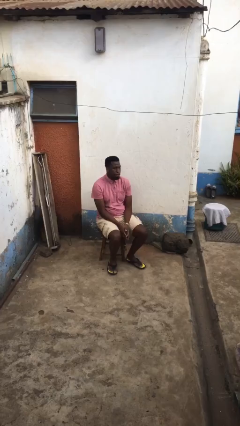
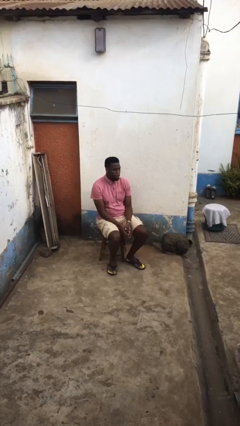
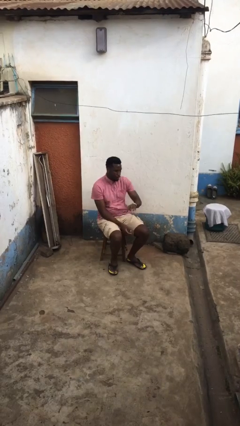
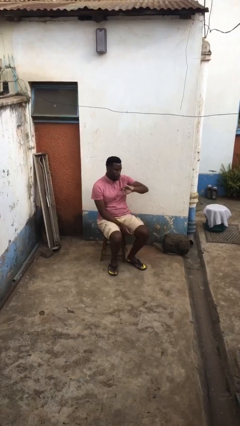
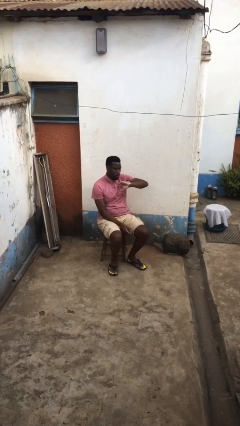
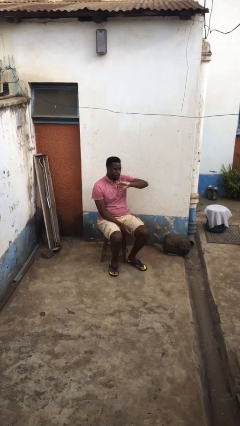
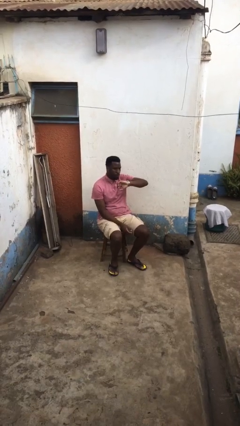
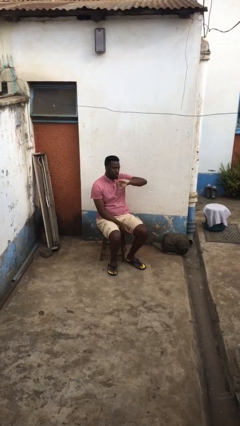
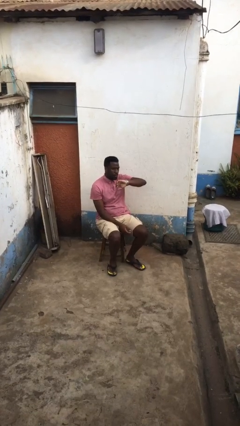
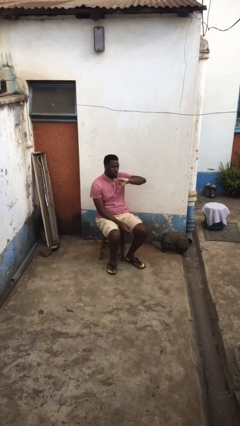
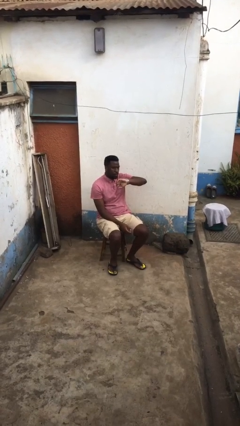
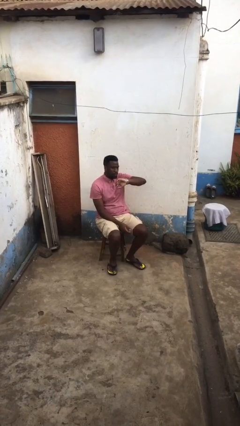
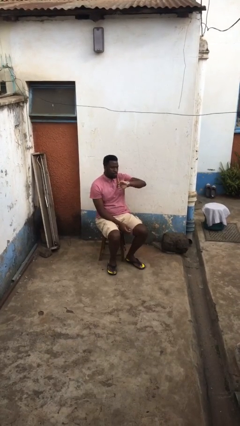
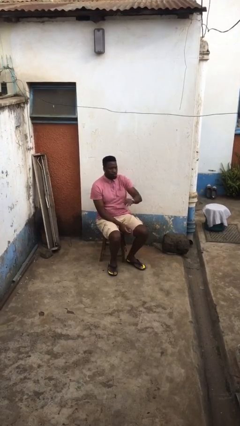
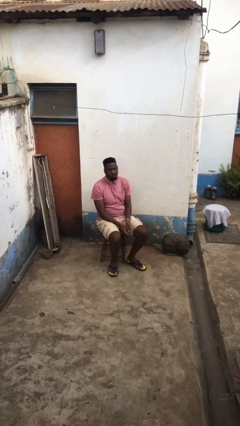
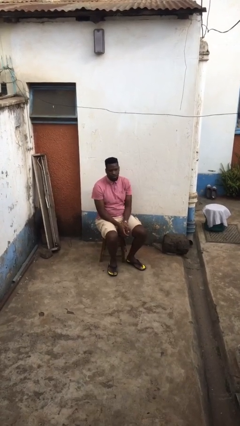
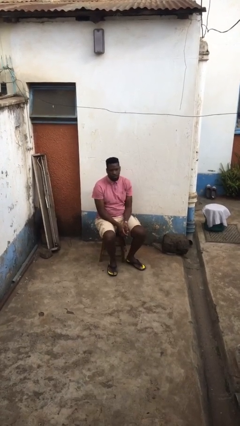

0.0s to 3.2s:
person looks at wristwatch

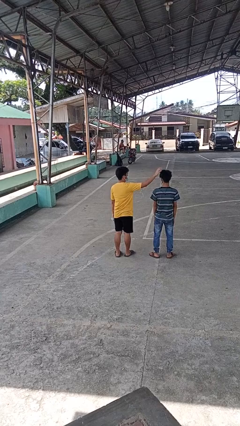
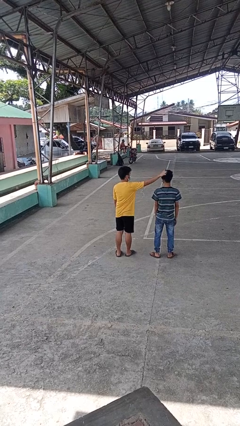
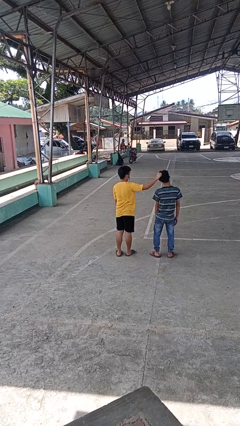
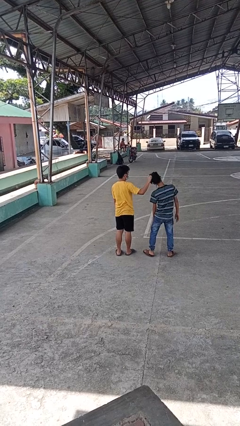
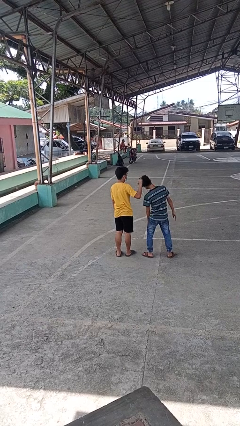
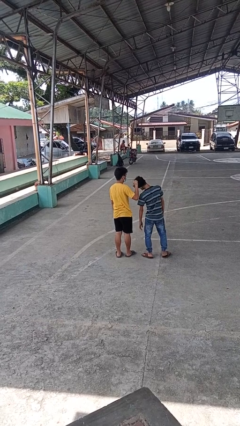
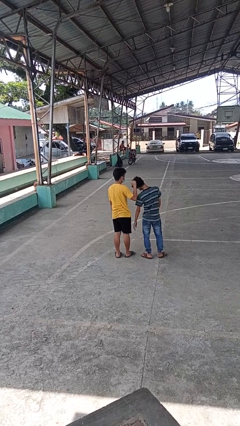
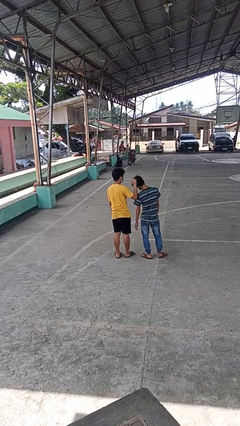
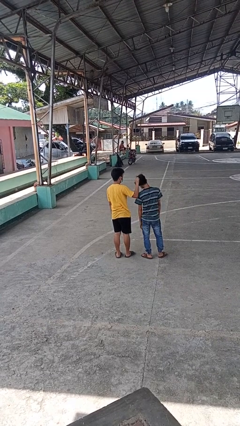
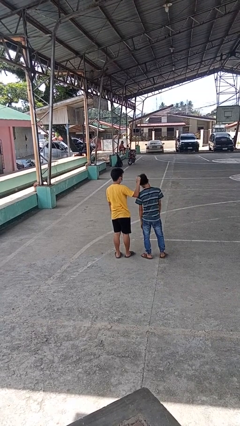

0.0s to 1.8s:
person grabs person by hair

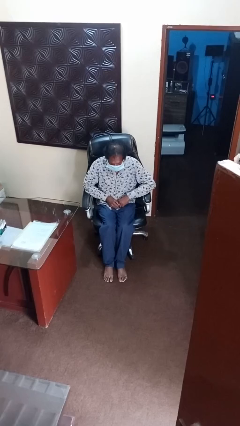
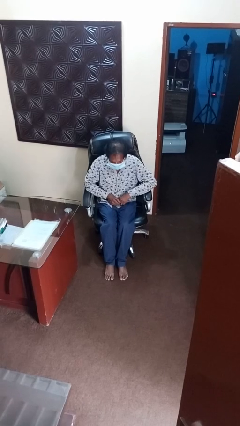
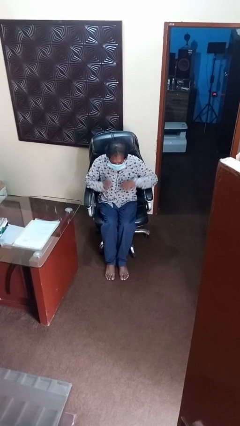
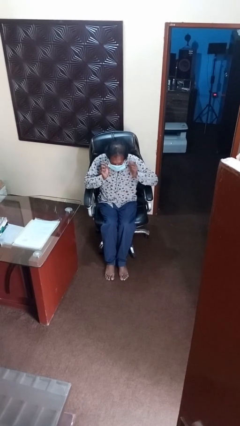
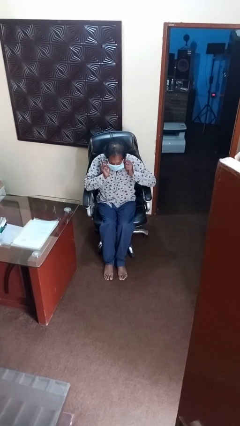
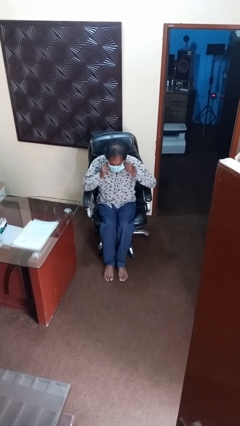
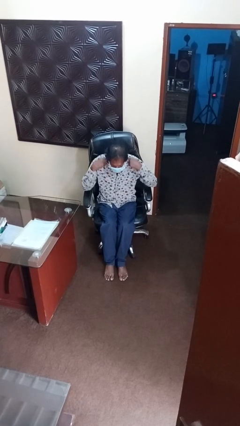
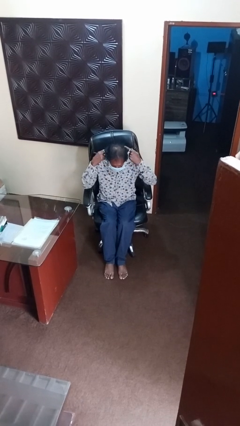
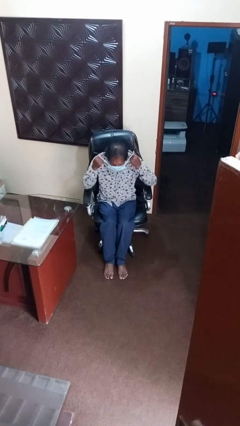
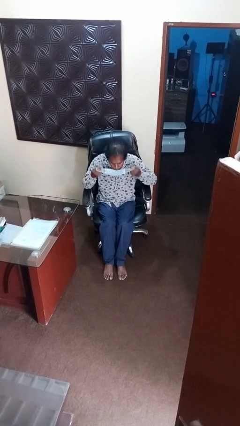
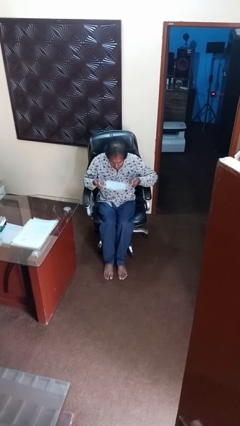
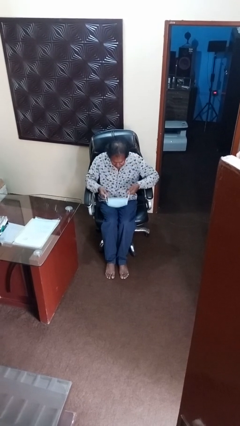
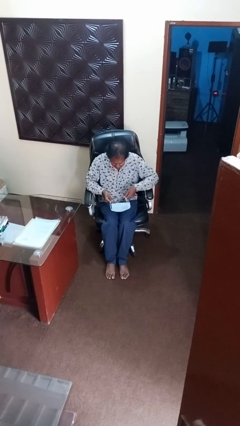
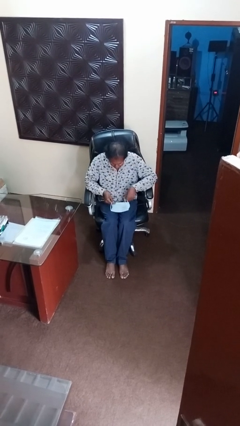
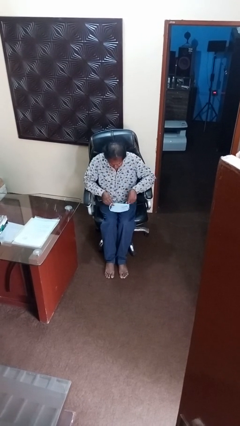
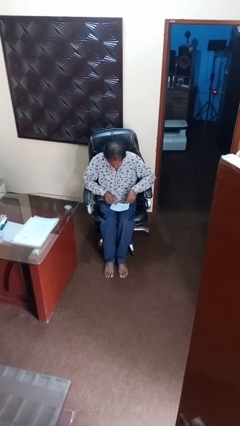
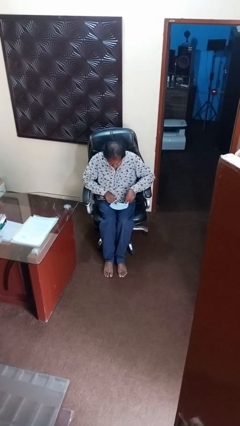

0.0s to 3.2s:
person takes off facemask

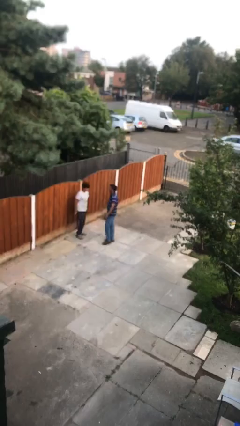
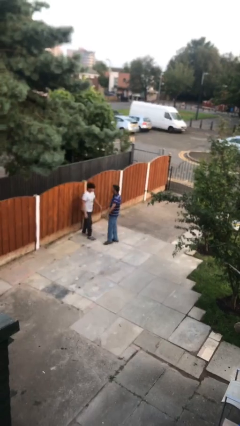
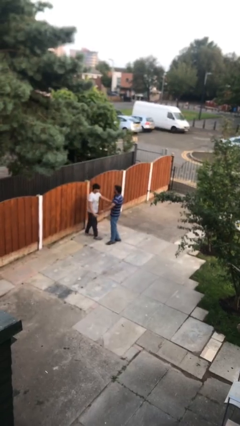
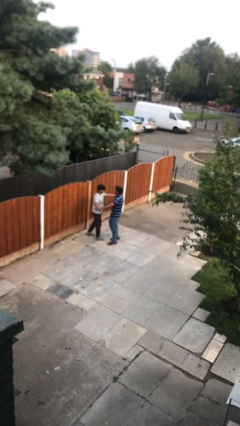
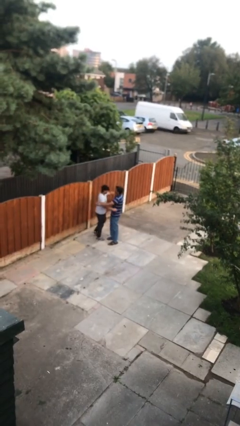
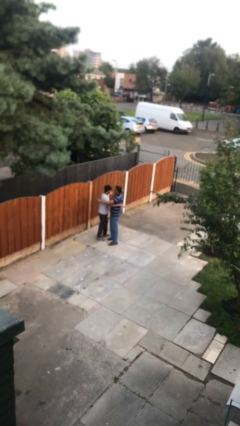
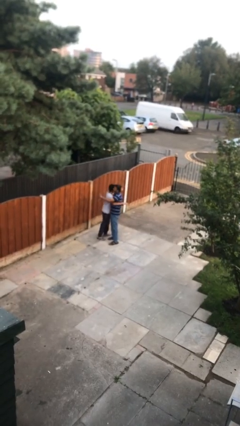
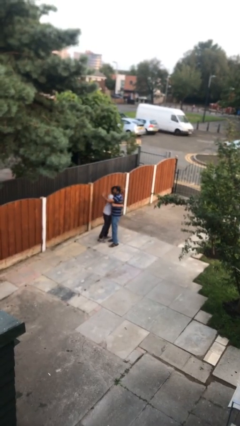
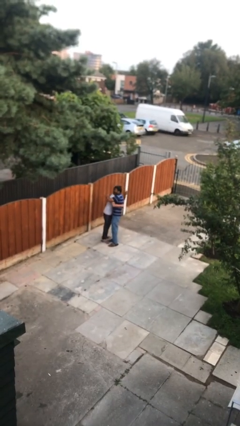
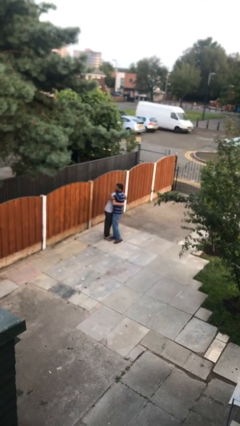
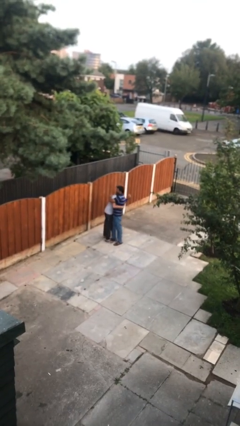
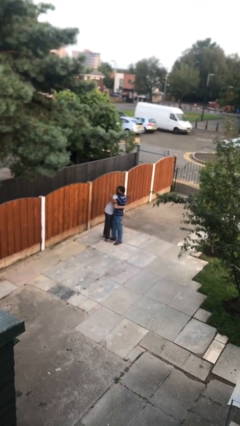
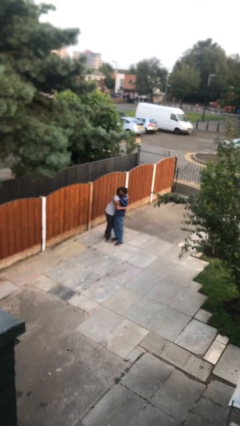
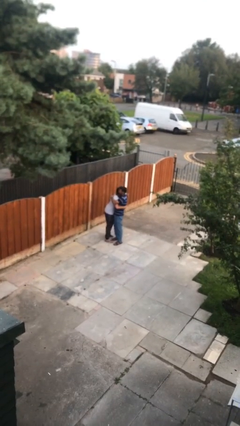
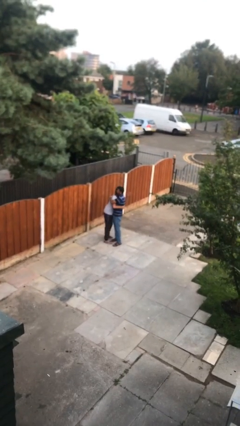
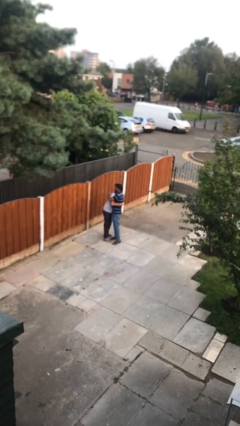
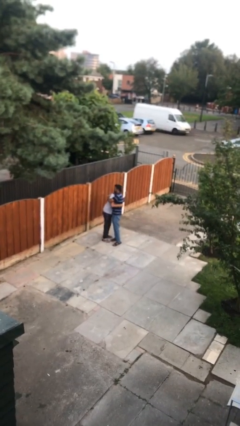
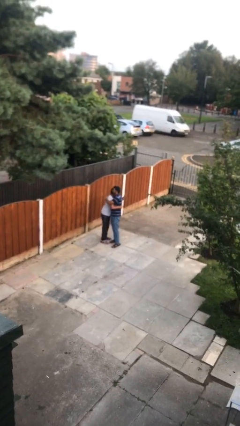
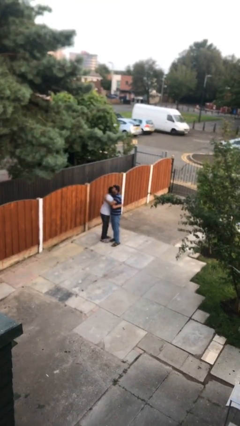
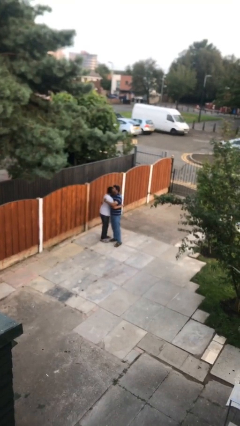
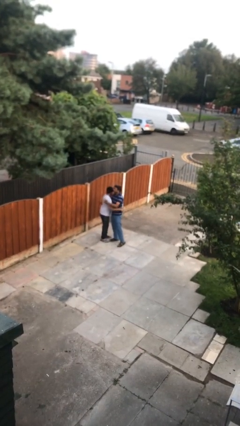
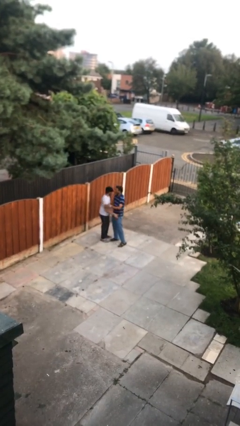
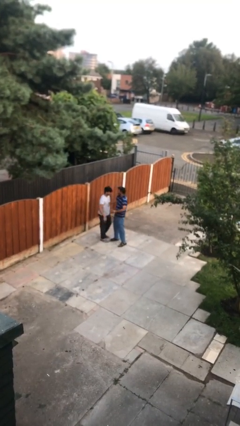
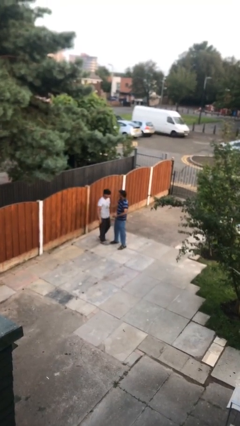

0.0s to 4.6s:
person embraces person

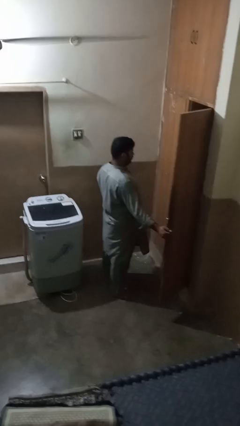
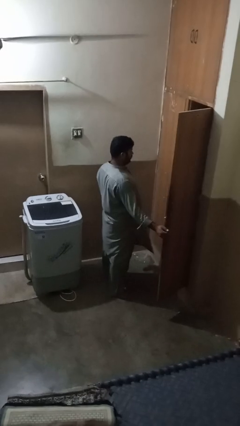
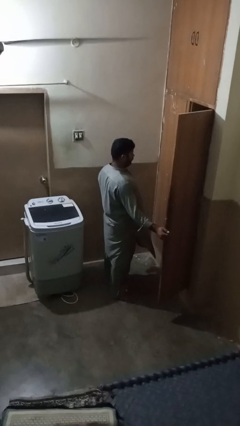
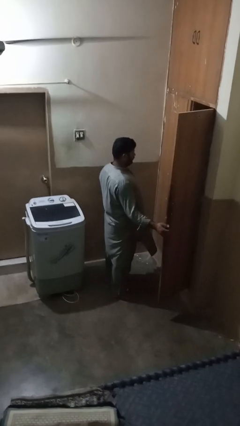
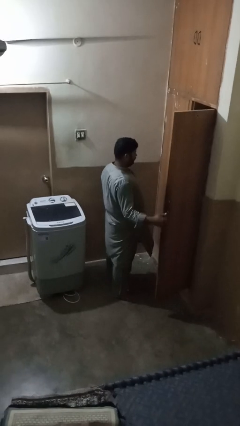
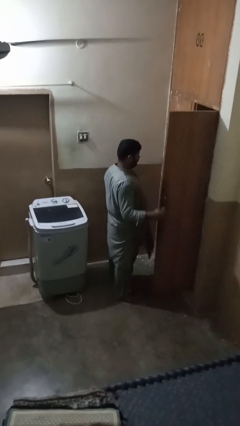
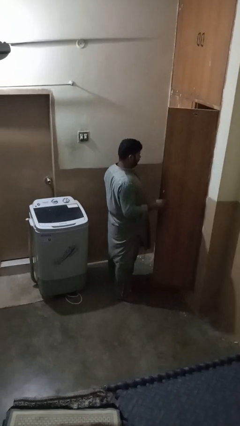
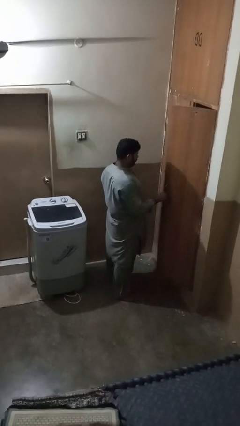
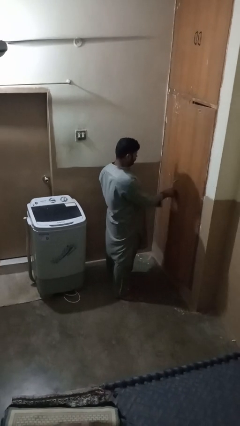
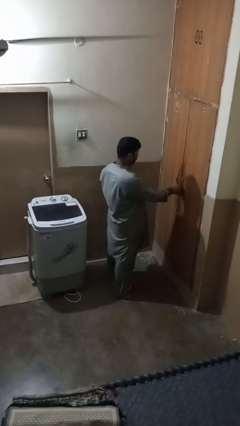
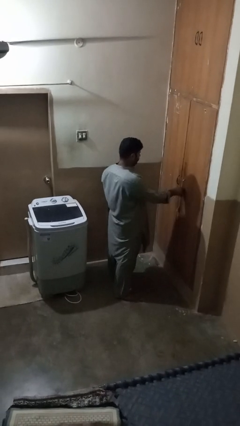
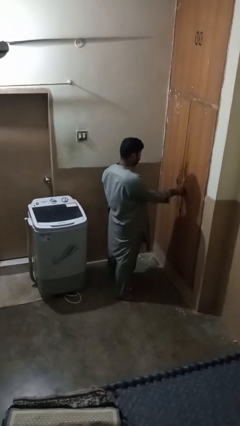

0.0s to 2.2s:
person closes closet door

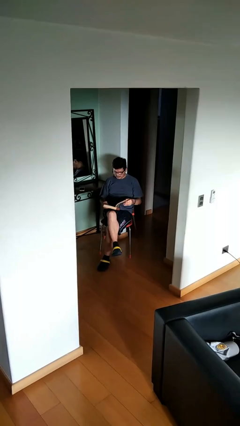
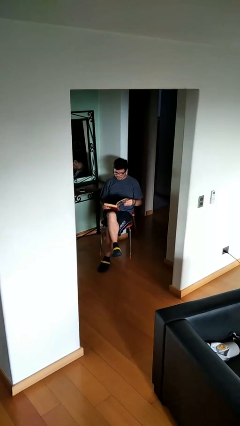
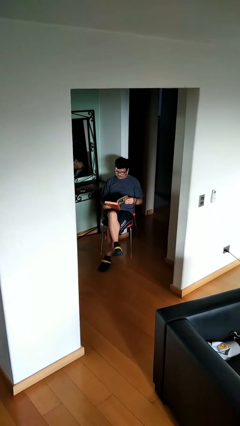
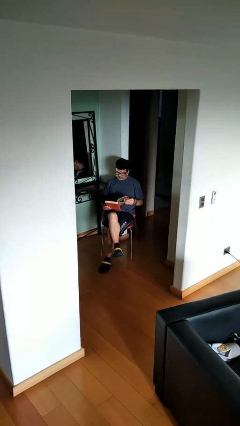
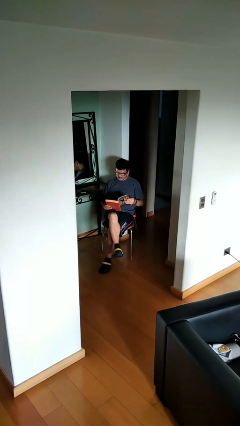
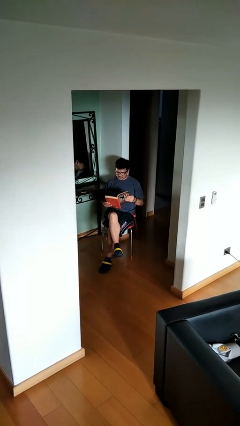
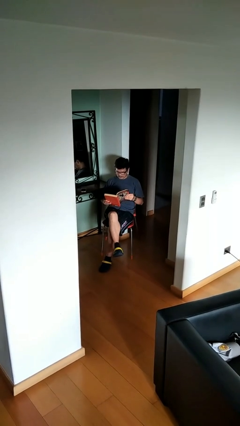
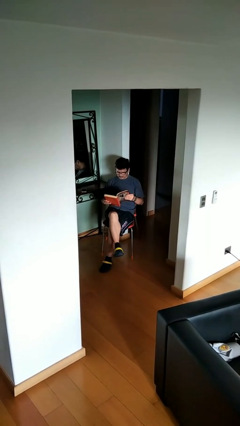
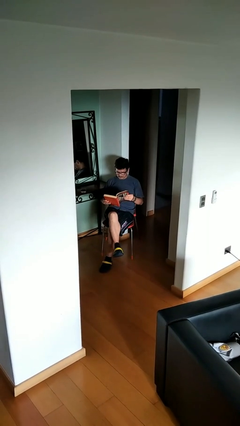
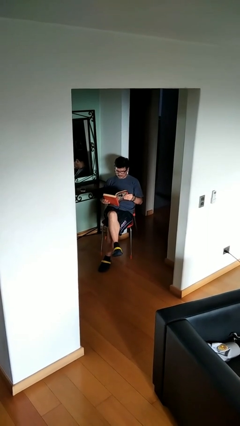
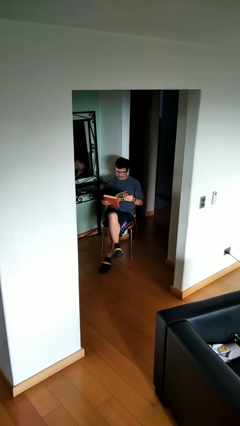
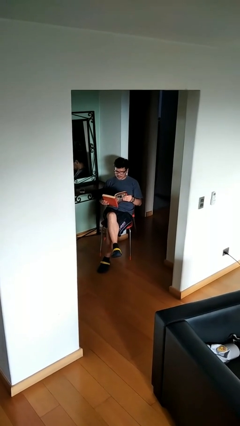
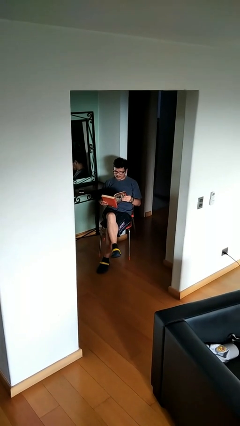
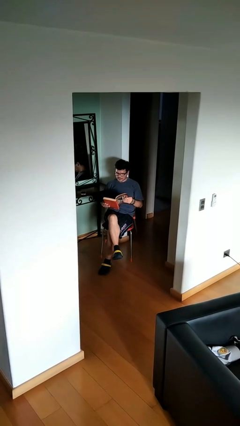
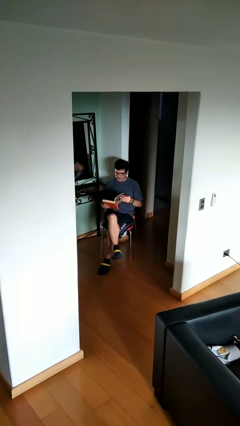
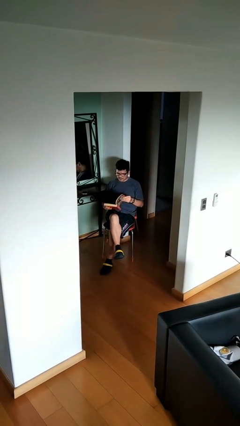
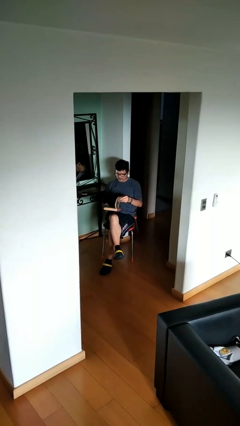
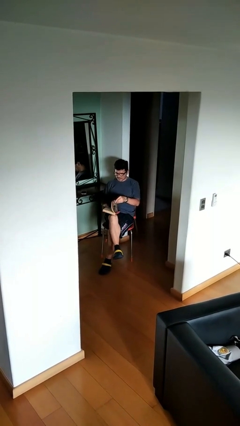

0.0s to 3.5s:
person reads document
